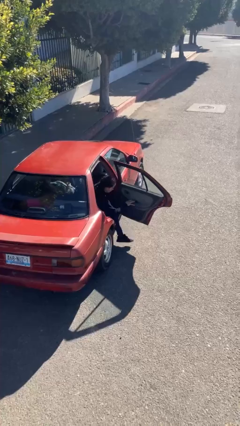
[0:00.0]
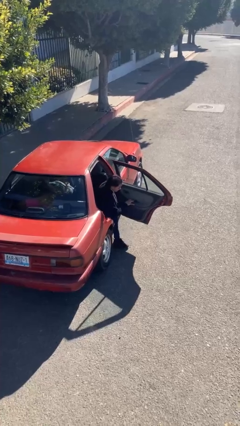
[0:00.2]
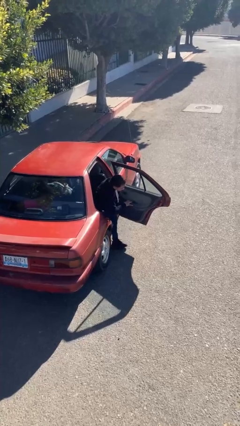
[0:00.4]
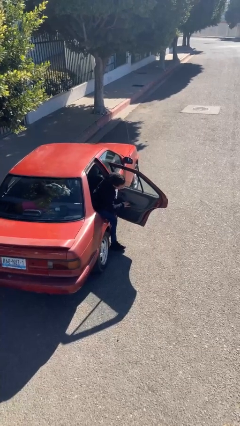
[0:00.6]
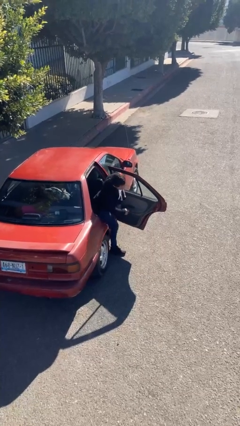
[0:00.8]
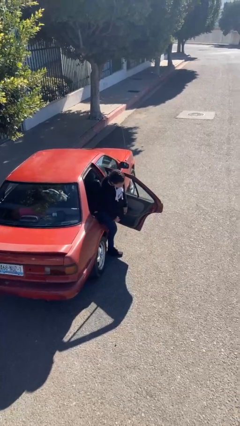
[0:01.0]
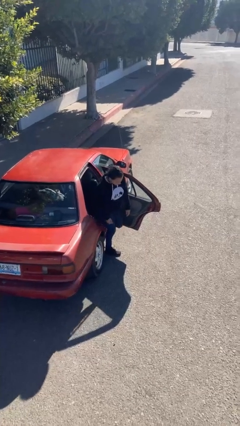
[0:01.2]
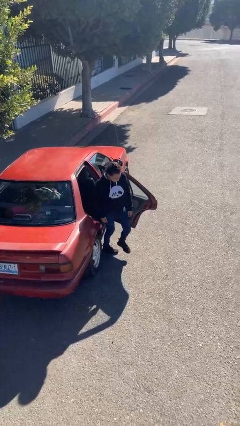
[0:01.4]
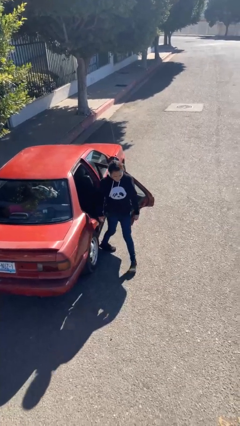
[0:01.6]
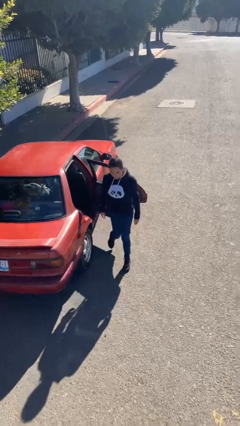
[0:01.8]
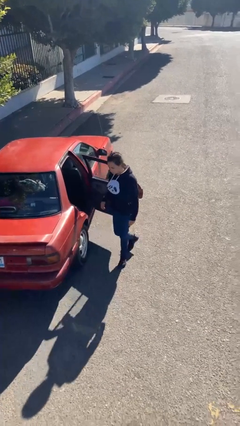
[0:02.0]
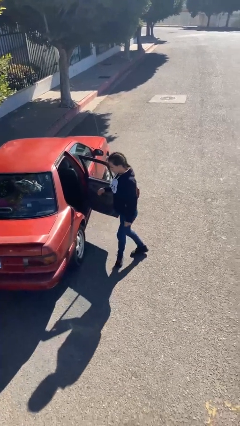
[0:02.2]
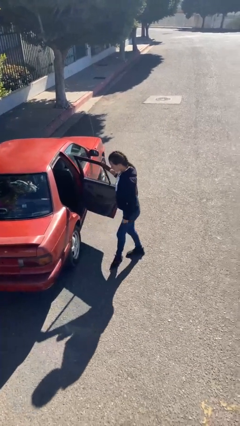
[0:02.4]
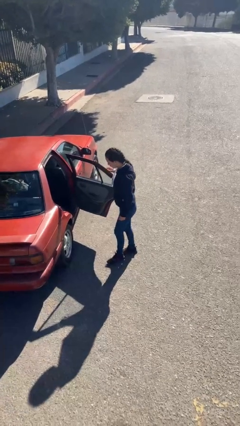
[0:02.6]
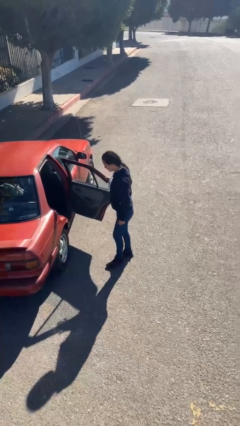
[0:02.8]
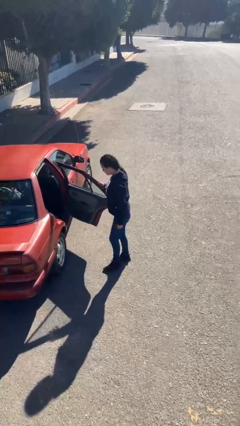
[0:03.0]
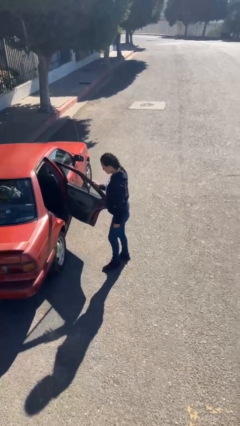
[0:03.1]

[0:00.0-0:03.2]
person exits car

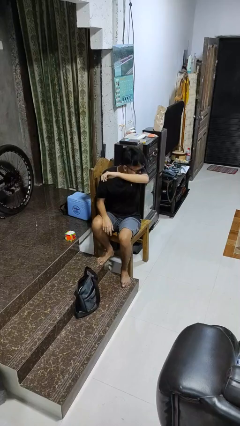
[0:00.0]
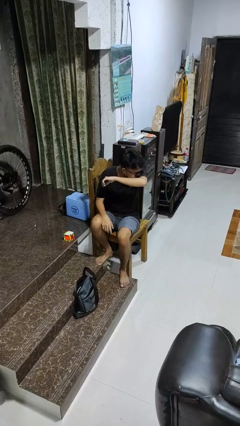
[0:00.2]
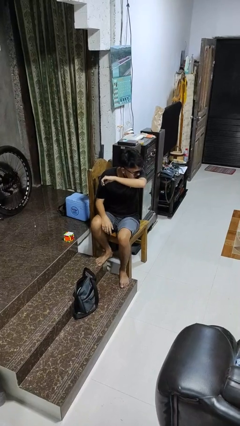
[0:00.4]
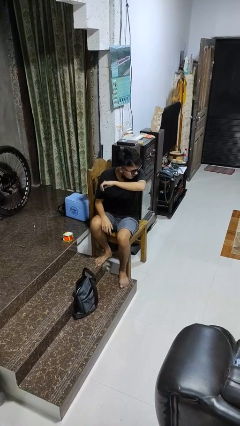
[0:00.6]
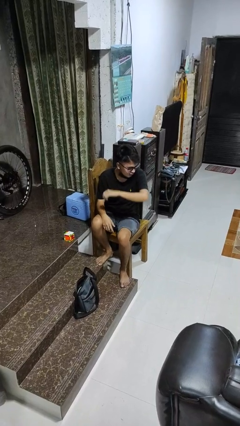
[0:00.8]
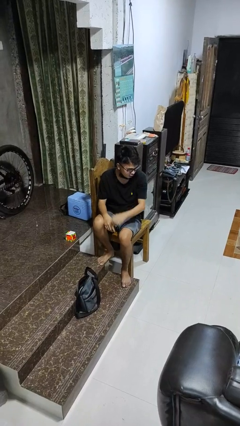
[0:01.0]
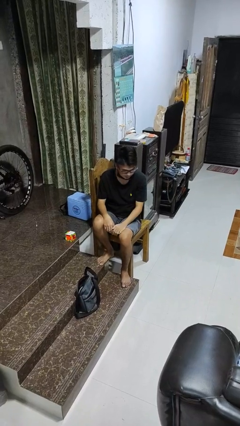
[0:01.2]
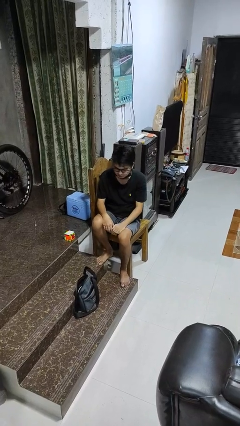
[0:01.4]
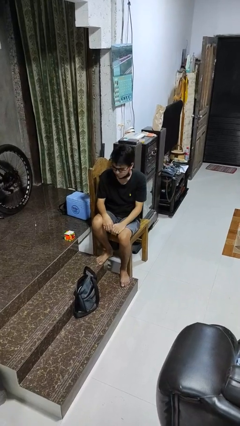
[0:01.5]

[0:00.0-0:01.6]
person sneezes into arm

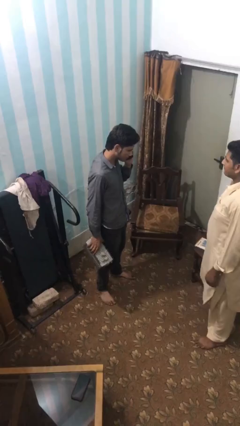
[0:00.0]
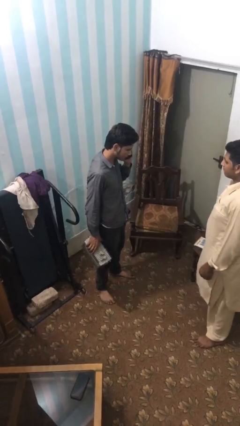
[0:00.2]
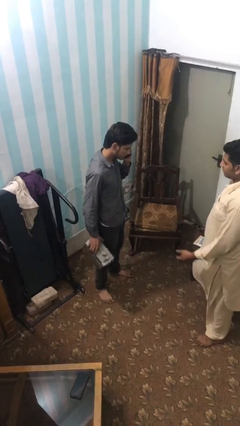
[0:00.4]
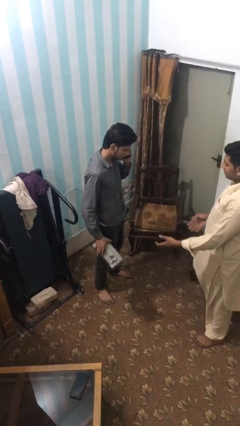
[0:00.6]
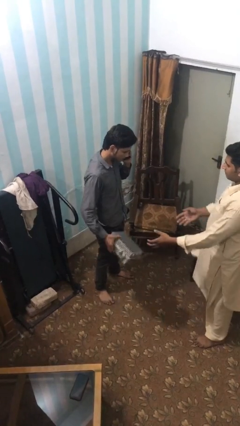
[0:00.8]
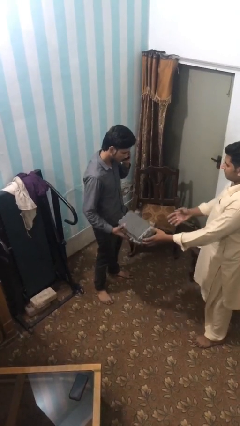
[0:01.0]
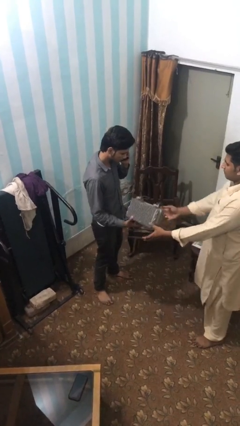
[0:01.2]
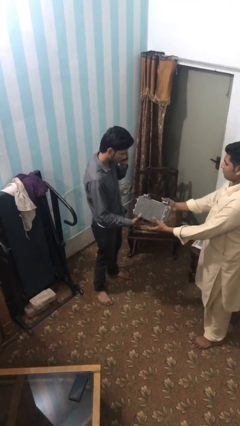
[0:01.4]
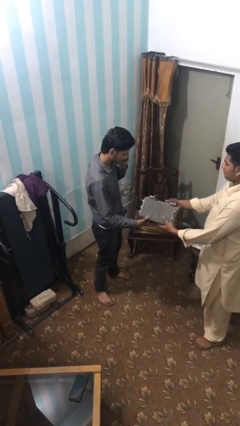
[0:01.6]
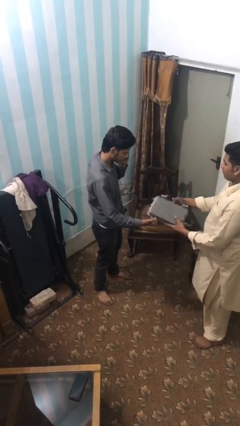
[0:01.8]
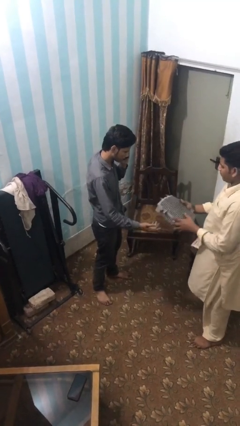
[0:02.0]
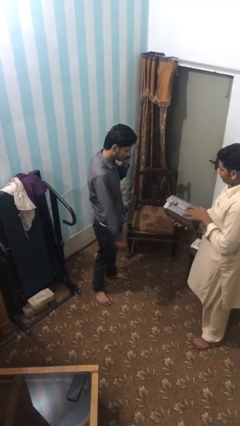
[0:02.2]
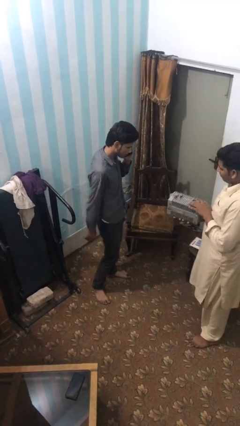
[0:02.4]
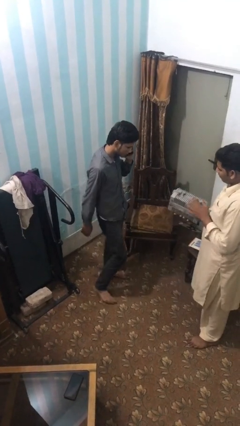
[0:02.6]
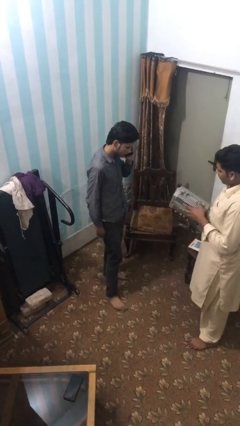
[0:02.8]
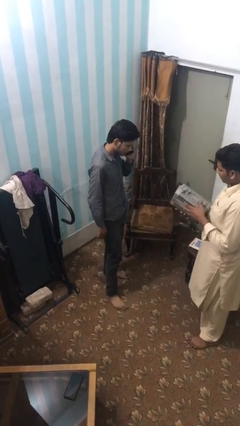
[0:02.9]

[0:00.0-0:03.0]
person transfers object to person

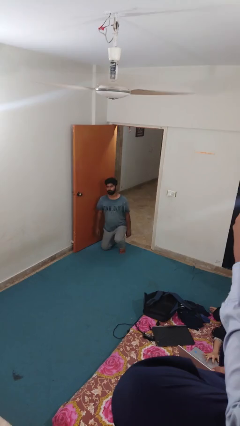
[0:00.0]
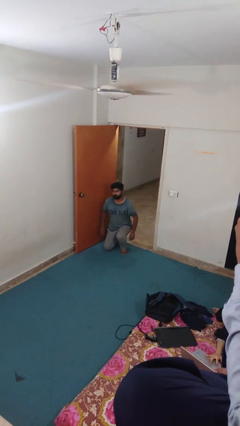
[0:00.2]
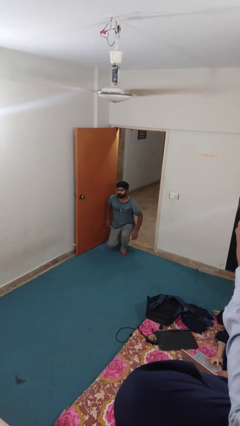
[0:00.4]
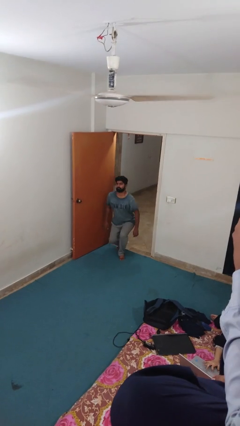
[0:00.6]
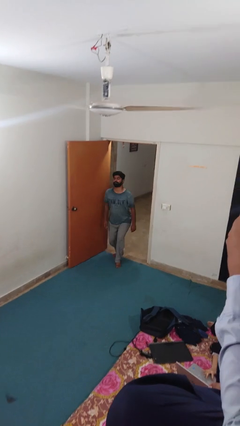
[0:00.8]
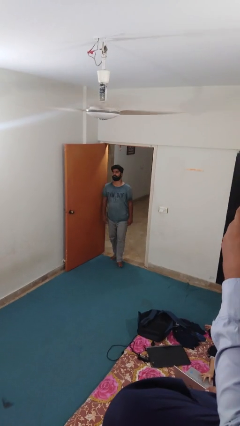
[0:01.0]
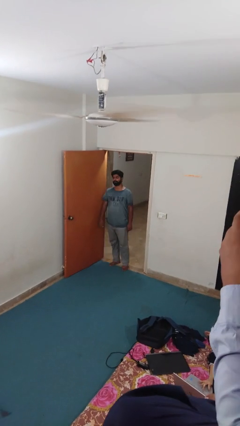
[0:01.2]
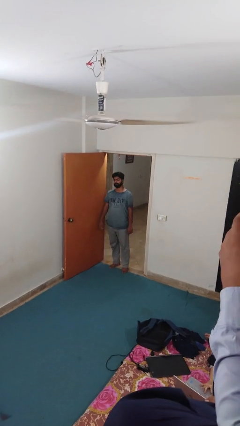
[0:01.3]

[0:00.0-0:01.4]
person stands up from floor

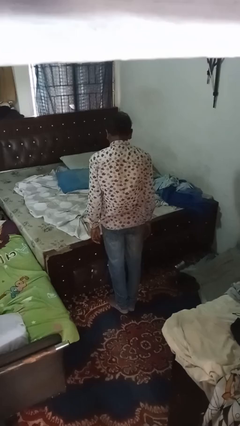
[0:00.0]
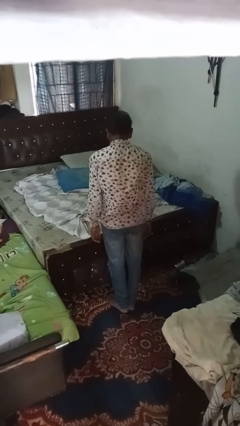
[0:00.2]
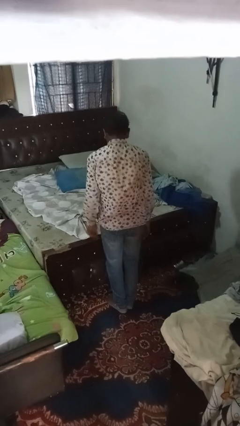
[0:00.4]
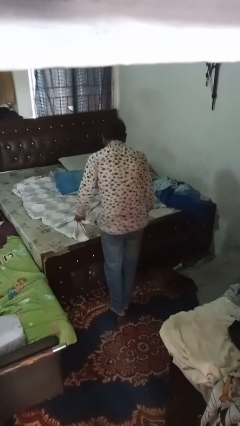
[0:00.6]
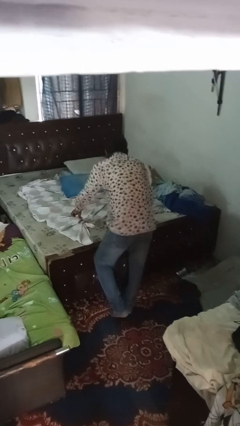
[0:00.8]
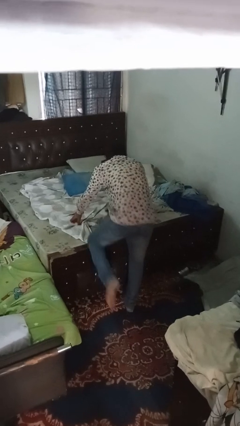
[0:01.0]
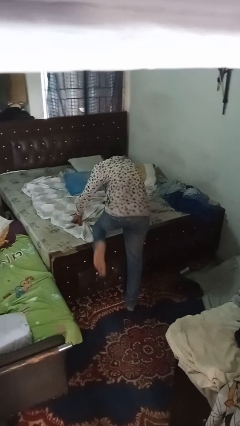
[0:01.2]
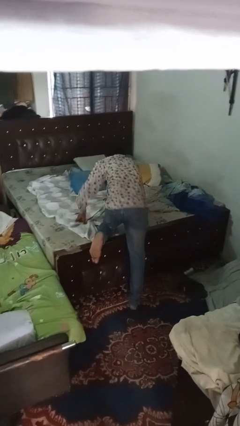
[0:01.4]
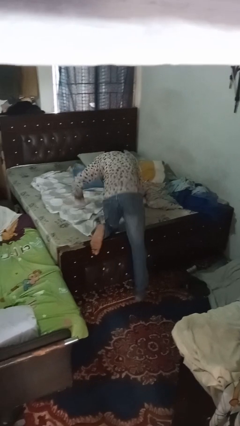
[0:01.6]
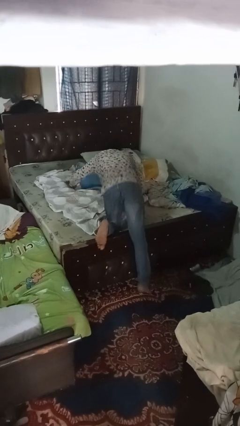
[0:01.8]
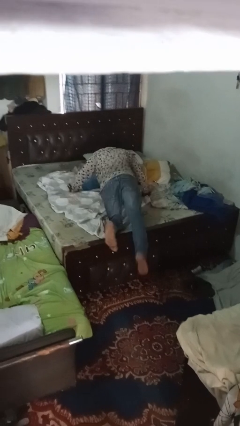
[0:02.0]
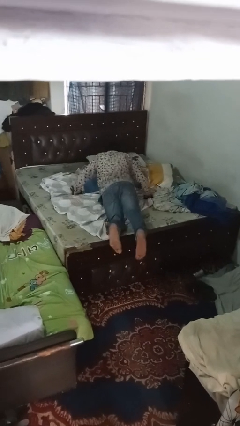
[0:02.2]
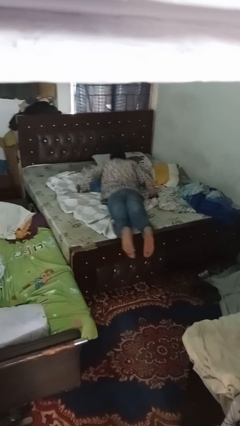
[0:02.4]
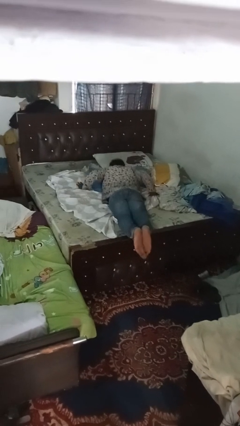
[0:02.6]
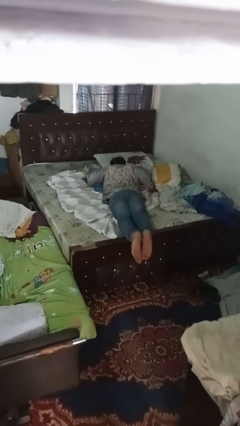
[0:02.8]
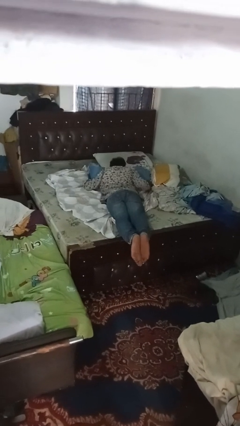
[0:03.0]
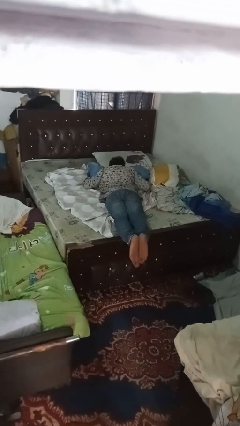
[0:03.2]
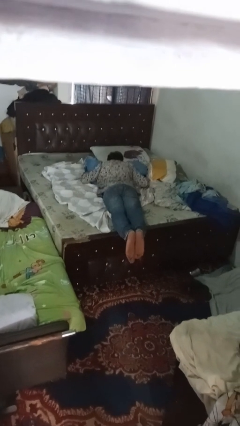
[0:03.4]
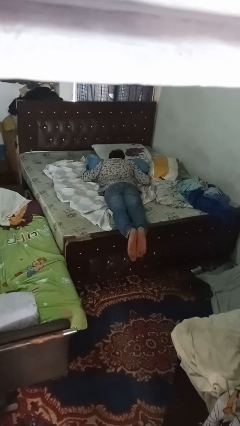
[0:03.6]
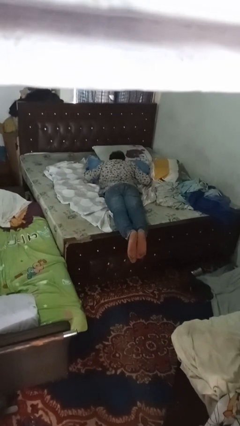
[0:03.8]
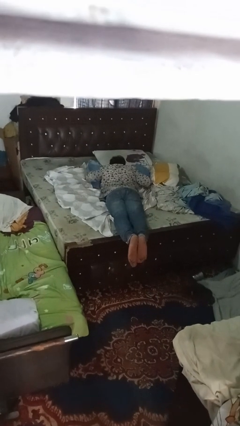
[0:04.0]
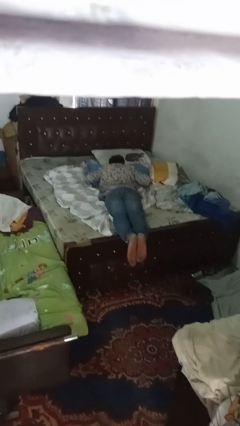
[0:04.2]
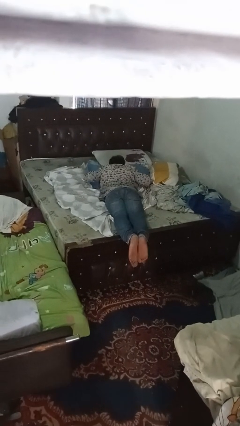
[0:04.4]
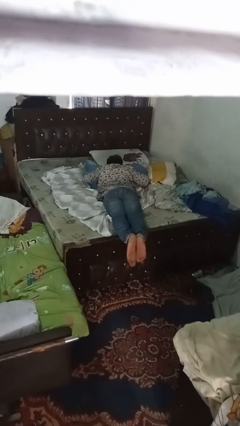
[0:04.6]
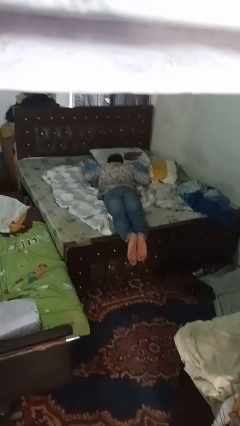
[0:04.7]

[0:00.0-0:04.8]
person lies down on bed

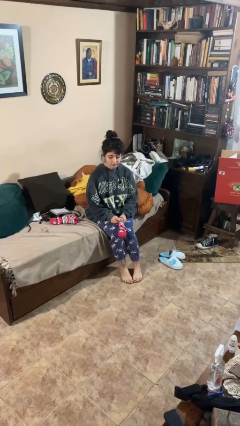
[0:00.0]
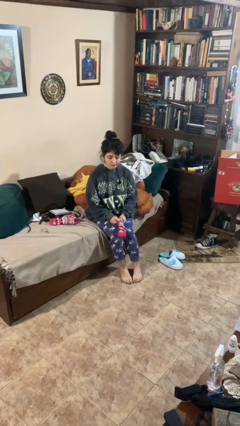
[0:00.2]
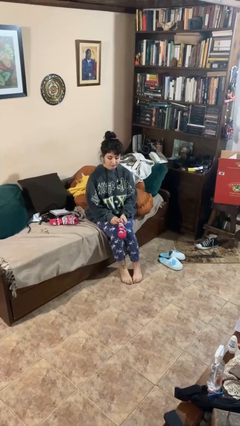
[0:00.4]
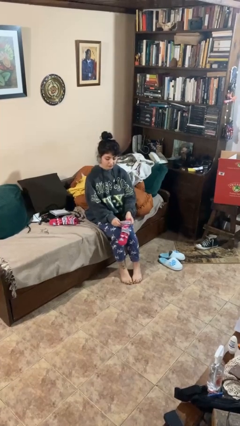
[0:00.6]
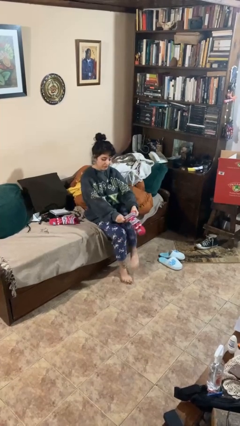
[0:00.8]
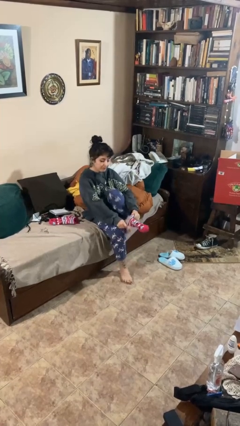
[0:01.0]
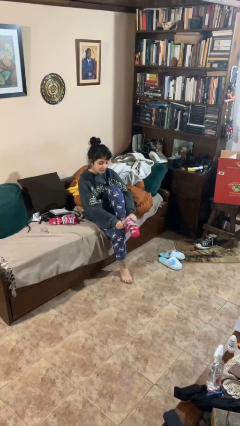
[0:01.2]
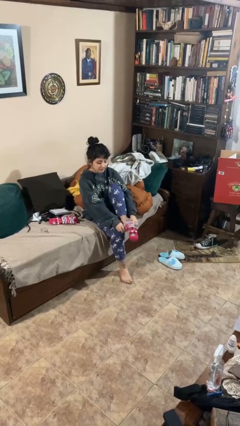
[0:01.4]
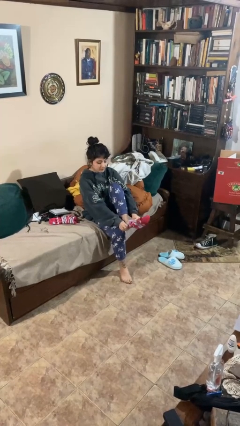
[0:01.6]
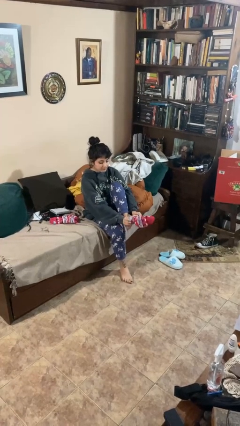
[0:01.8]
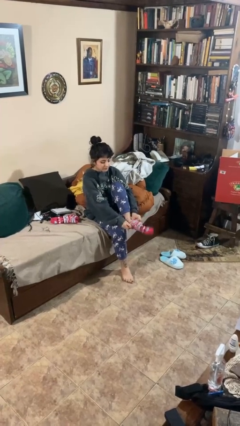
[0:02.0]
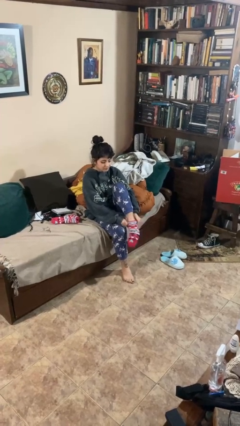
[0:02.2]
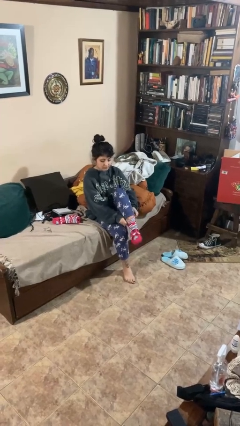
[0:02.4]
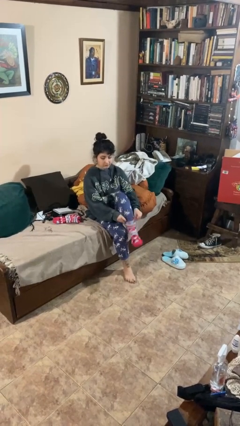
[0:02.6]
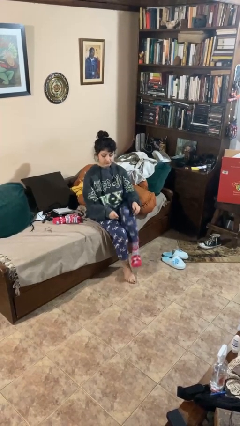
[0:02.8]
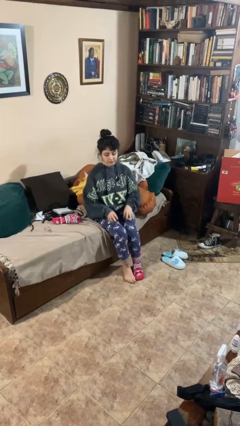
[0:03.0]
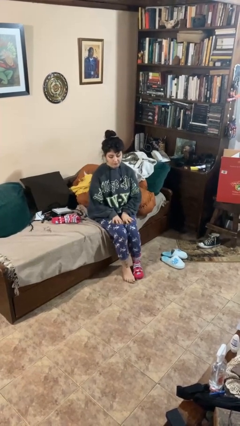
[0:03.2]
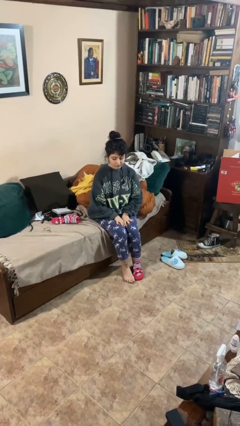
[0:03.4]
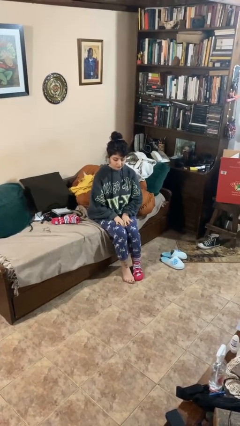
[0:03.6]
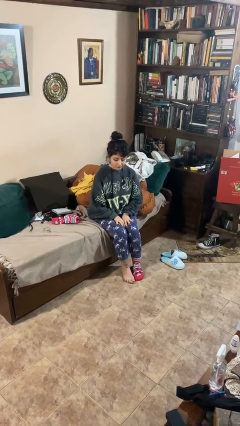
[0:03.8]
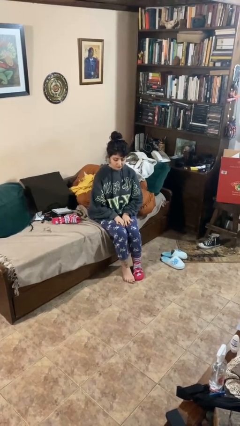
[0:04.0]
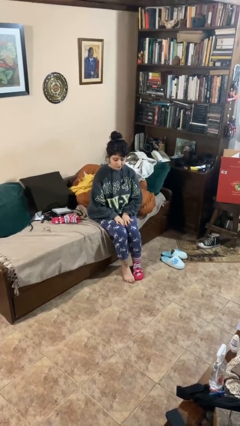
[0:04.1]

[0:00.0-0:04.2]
person puts on socks
